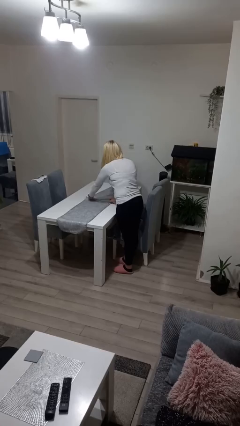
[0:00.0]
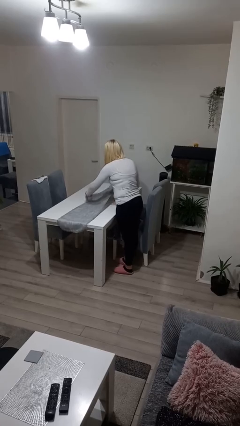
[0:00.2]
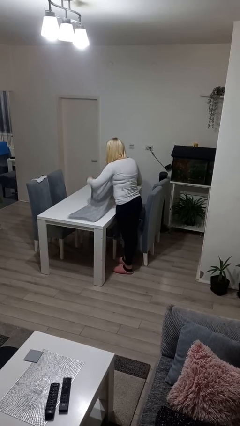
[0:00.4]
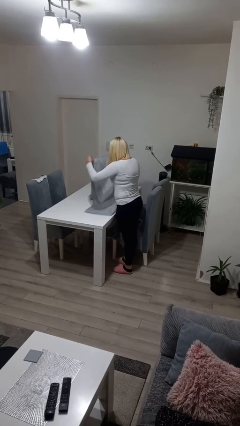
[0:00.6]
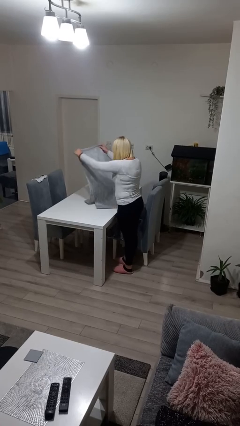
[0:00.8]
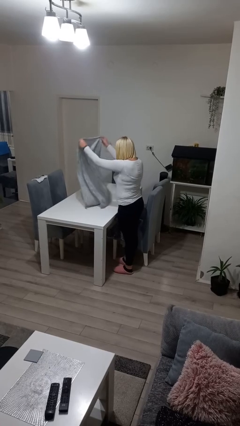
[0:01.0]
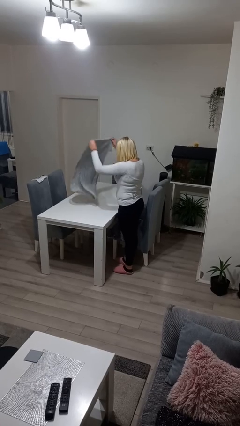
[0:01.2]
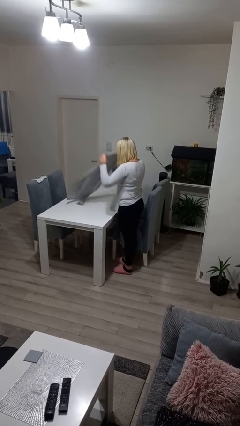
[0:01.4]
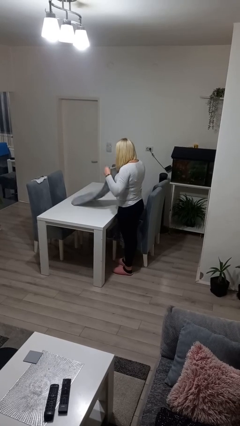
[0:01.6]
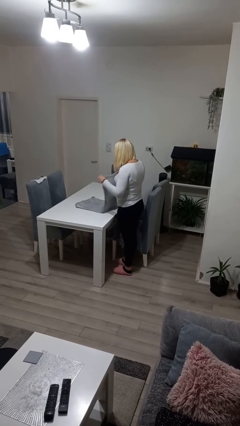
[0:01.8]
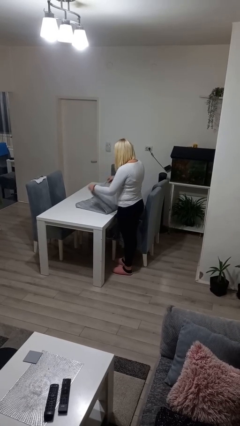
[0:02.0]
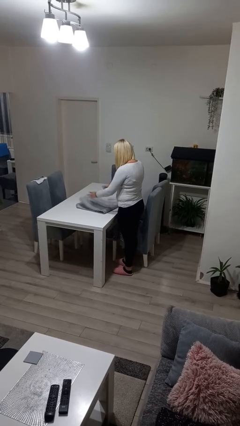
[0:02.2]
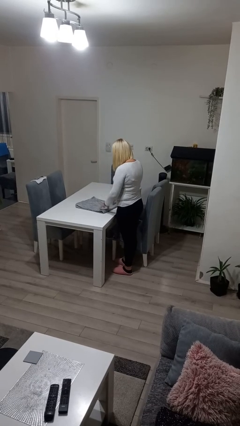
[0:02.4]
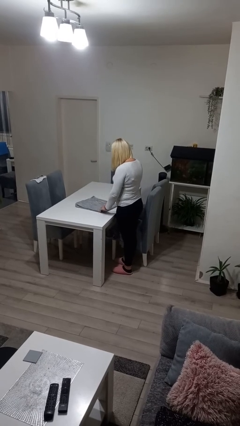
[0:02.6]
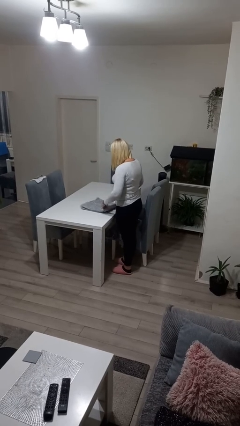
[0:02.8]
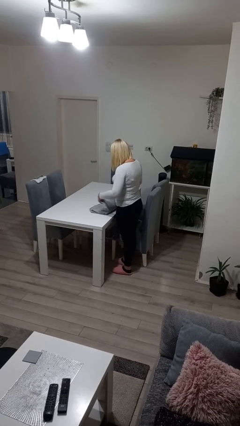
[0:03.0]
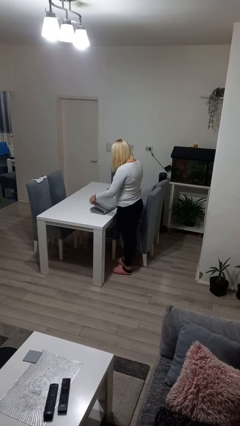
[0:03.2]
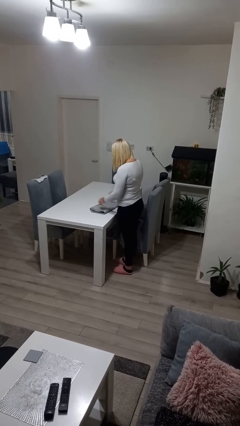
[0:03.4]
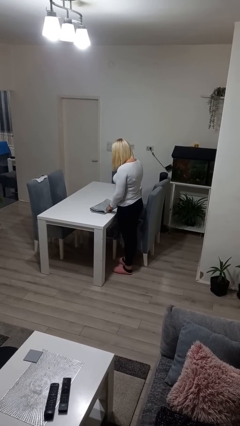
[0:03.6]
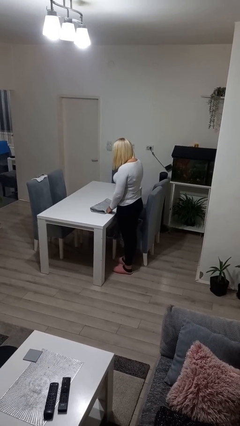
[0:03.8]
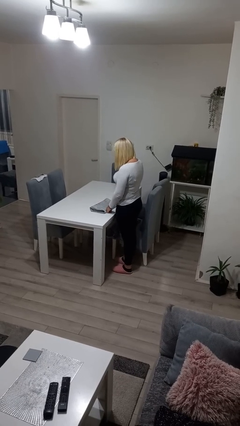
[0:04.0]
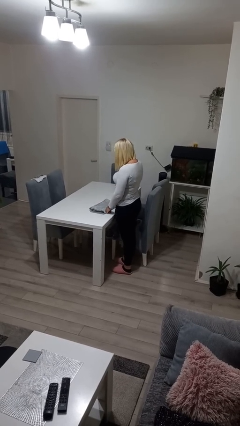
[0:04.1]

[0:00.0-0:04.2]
person folds tablecloth

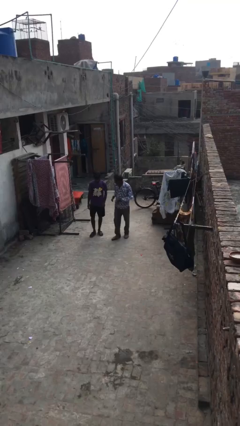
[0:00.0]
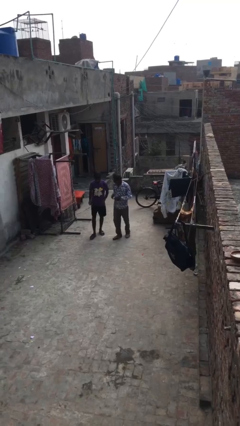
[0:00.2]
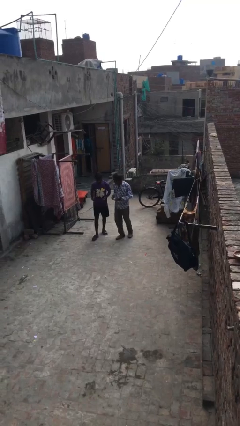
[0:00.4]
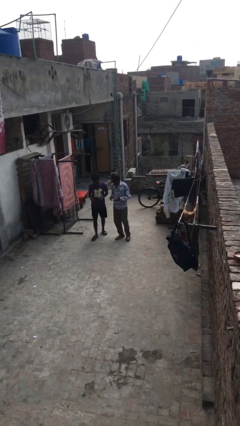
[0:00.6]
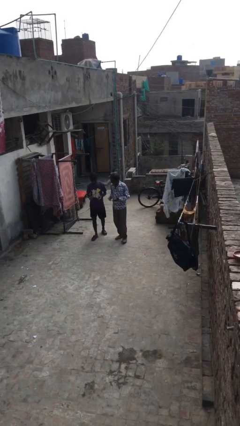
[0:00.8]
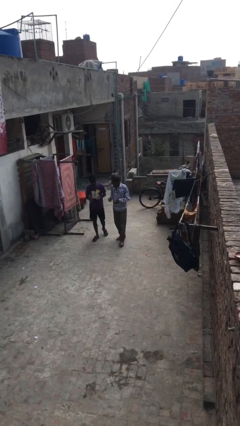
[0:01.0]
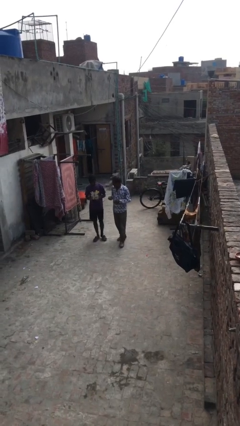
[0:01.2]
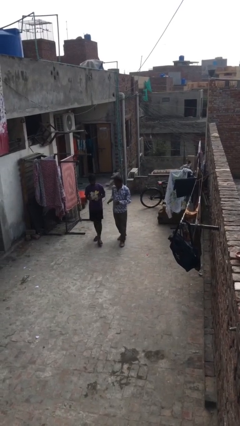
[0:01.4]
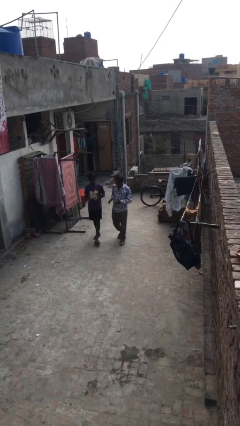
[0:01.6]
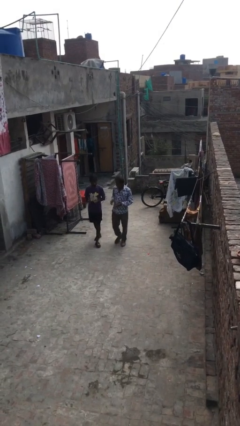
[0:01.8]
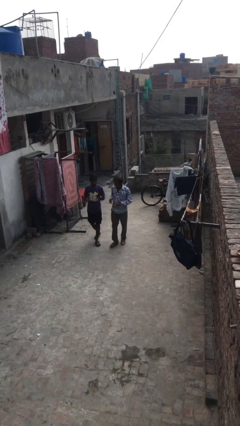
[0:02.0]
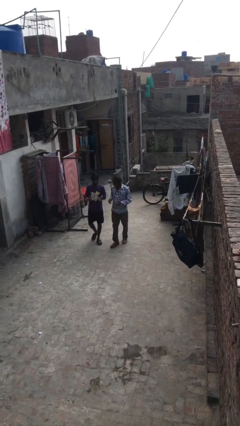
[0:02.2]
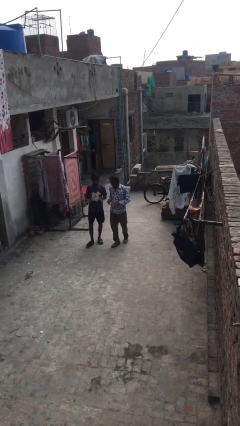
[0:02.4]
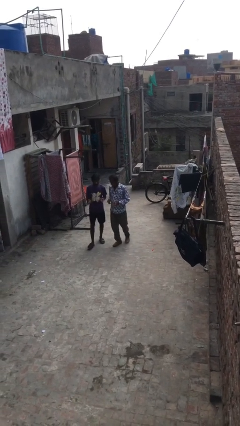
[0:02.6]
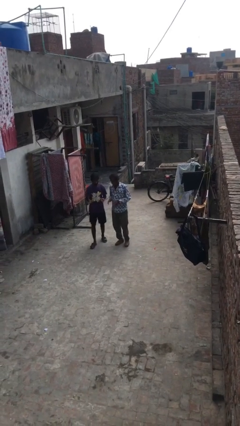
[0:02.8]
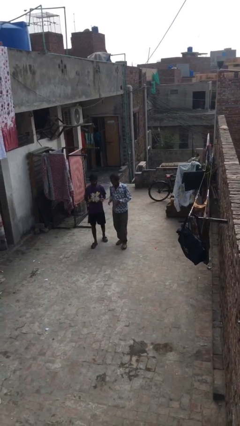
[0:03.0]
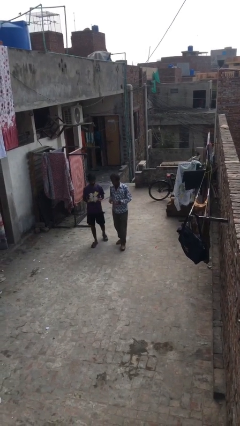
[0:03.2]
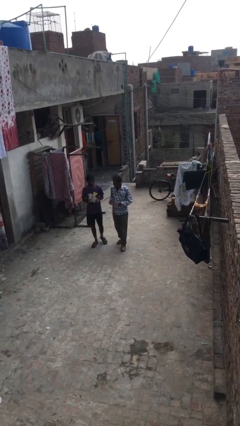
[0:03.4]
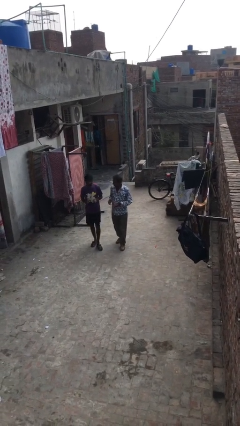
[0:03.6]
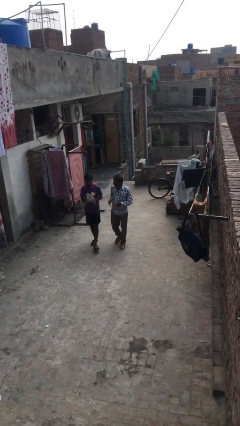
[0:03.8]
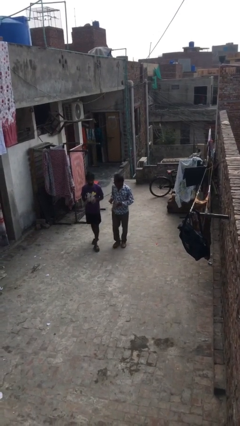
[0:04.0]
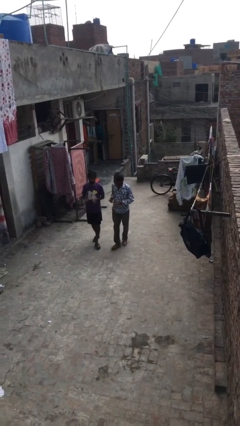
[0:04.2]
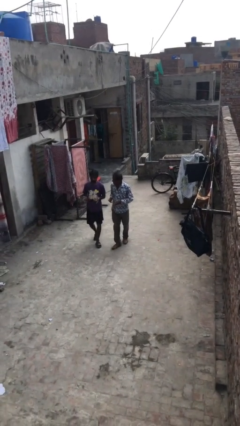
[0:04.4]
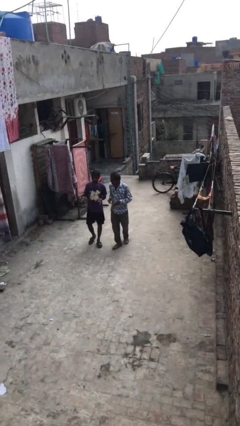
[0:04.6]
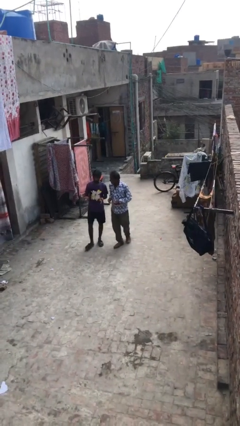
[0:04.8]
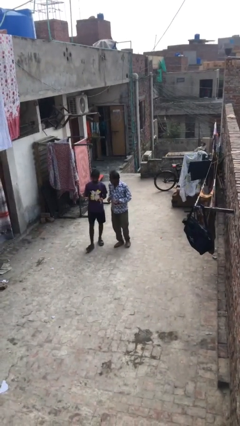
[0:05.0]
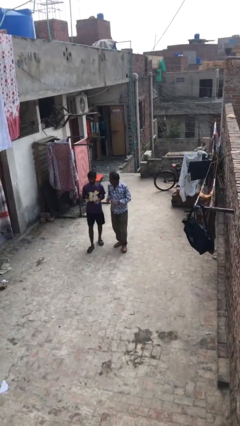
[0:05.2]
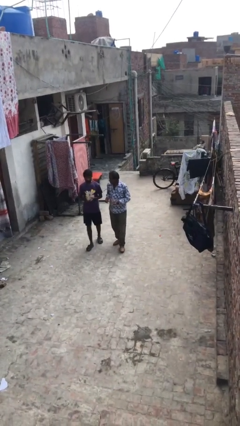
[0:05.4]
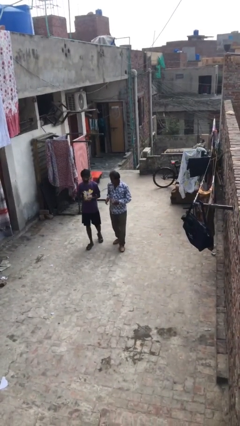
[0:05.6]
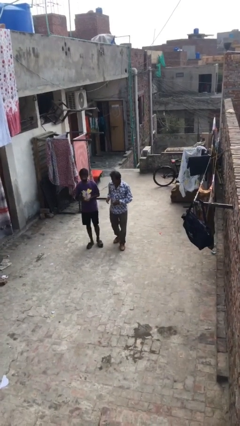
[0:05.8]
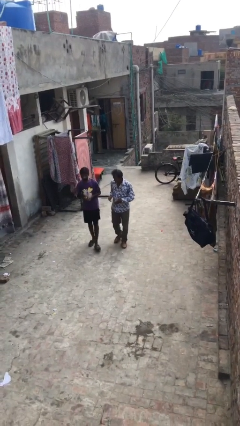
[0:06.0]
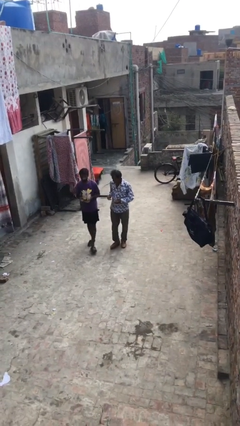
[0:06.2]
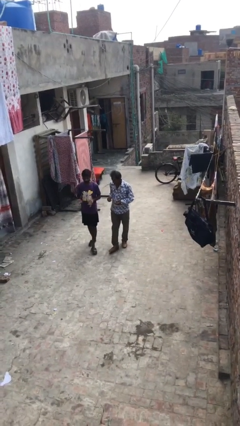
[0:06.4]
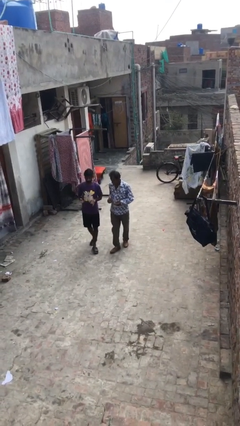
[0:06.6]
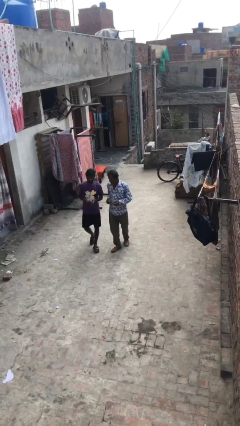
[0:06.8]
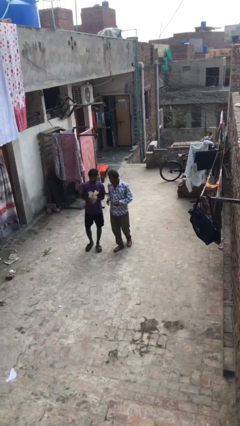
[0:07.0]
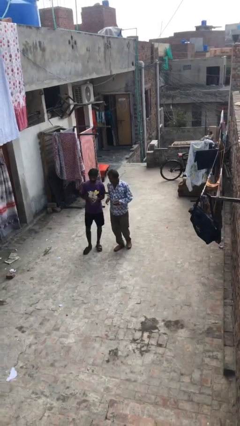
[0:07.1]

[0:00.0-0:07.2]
person talks to person

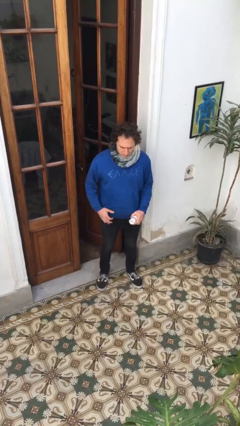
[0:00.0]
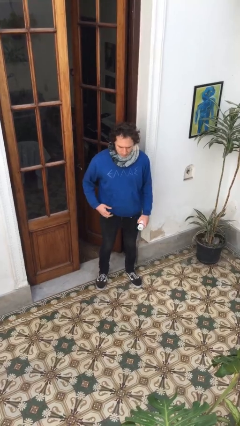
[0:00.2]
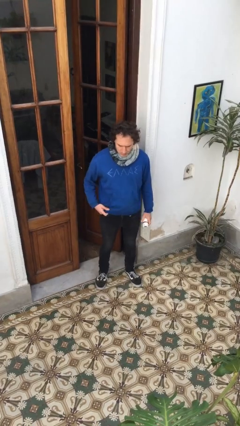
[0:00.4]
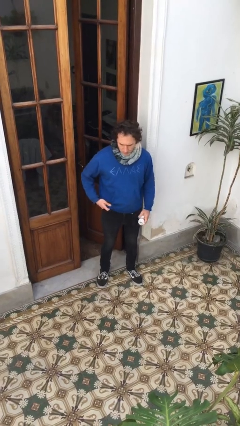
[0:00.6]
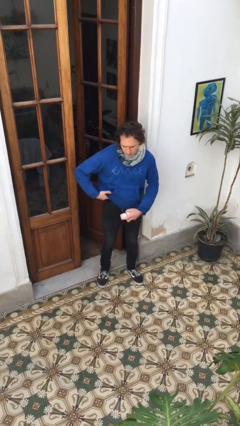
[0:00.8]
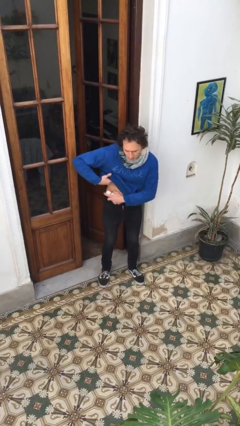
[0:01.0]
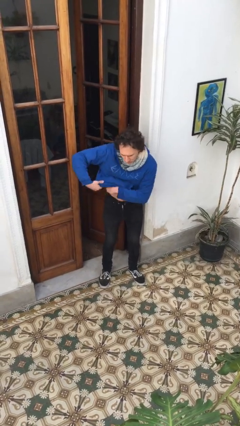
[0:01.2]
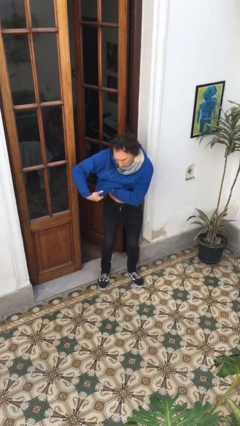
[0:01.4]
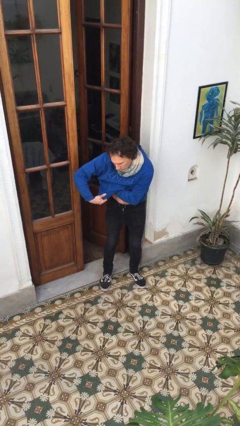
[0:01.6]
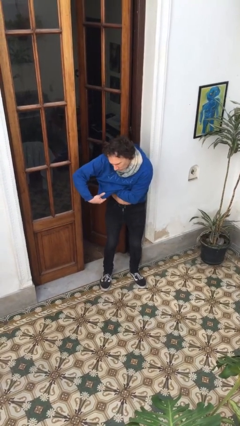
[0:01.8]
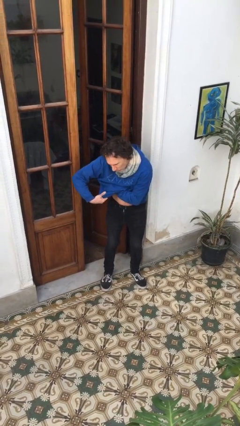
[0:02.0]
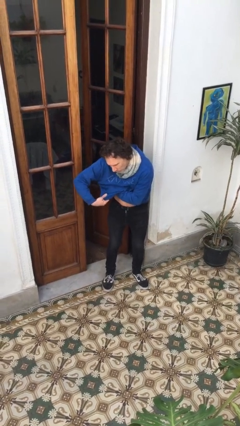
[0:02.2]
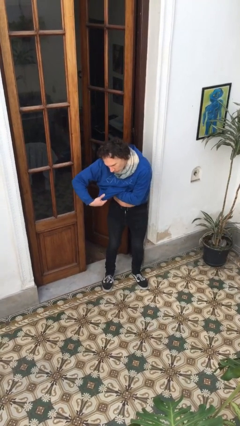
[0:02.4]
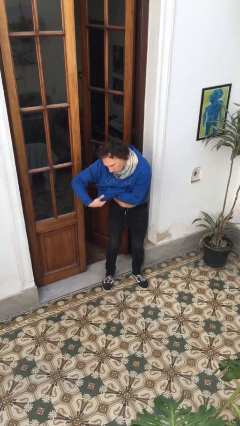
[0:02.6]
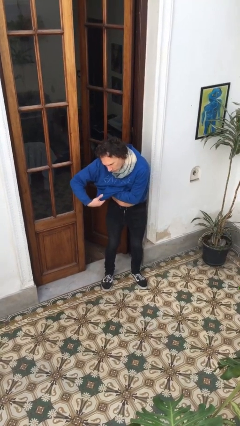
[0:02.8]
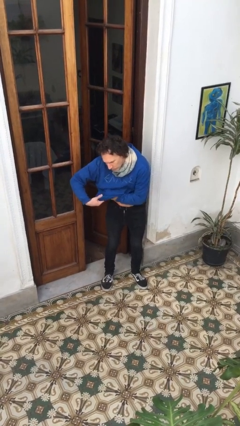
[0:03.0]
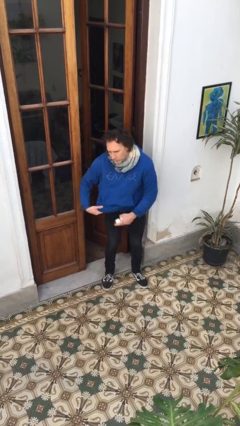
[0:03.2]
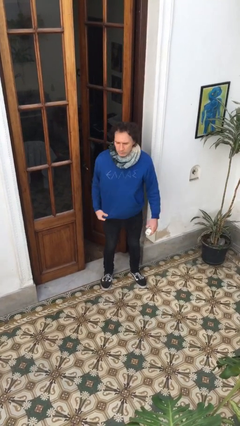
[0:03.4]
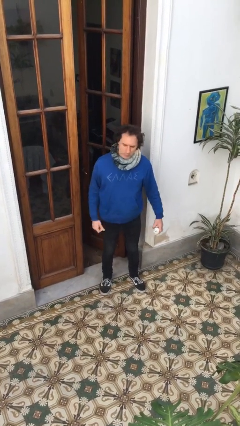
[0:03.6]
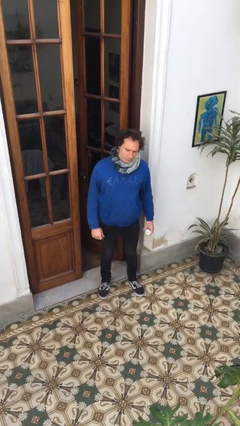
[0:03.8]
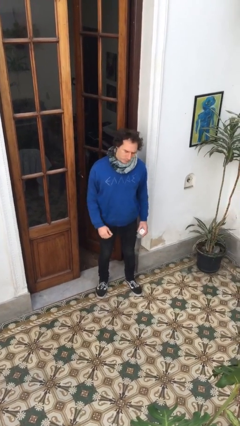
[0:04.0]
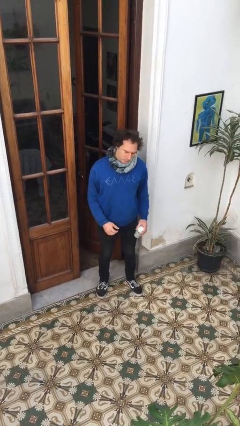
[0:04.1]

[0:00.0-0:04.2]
person applies deodorant

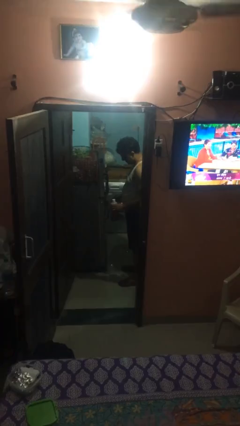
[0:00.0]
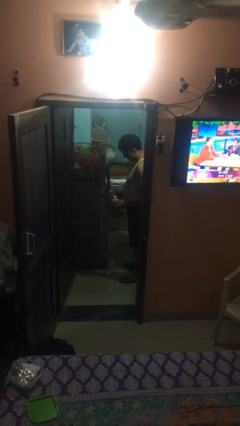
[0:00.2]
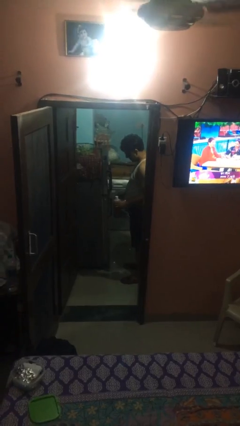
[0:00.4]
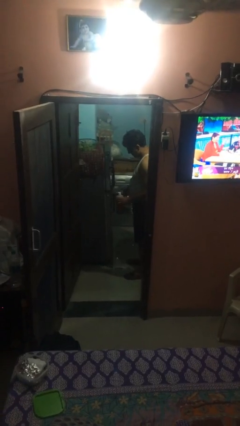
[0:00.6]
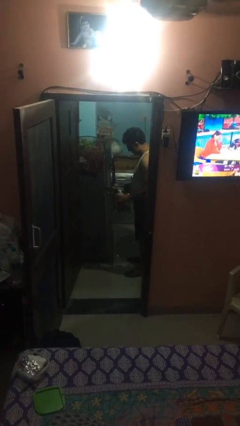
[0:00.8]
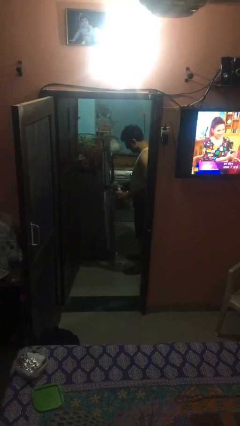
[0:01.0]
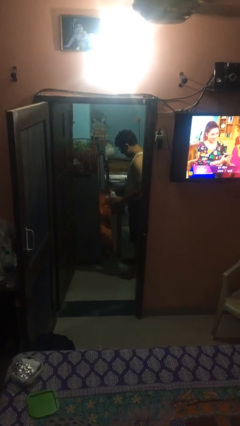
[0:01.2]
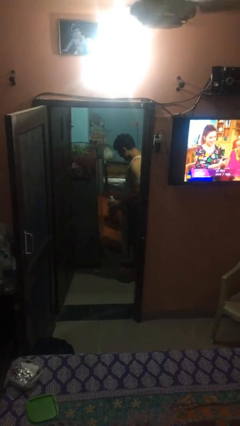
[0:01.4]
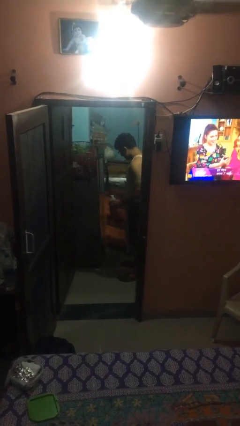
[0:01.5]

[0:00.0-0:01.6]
person opens refrigerator

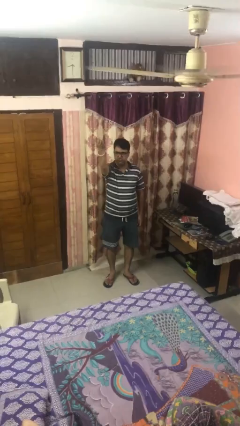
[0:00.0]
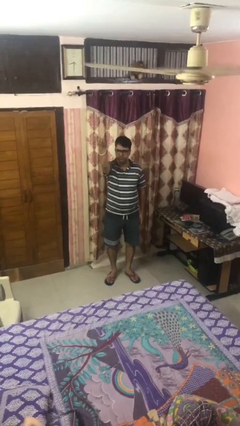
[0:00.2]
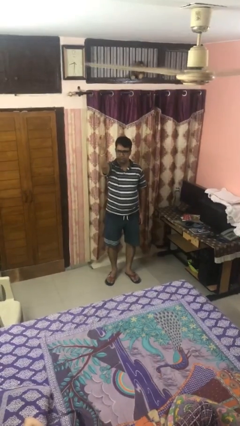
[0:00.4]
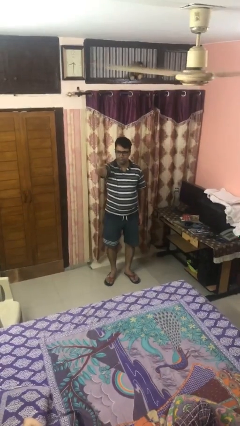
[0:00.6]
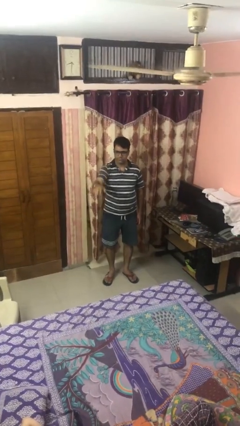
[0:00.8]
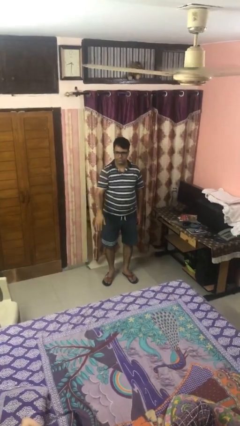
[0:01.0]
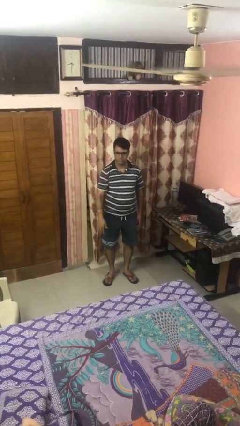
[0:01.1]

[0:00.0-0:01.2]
person gestures swipe down
